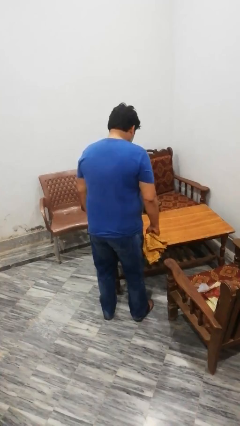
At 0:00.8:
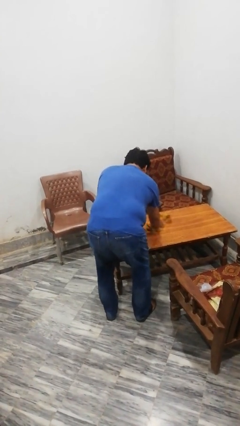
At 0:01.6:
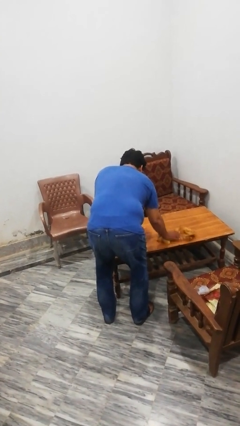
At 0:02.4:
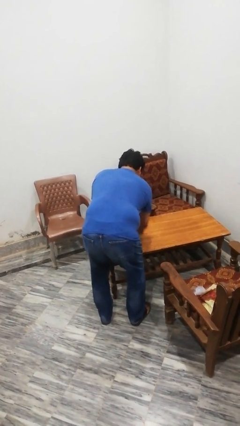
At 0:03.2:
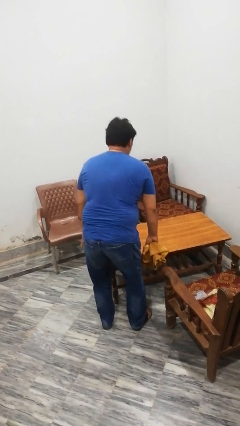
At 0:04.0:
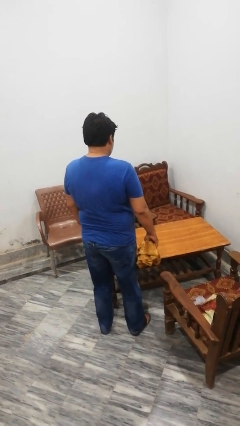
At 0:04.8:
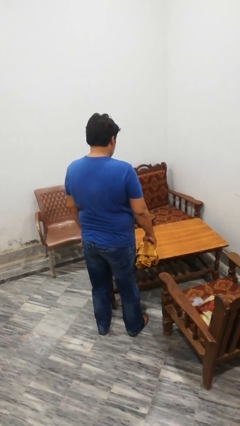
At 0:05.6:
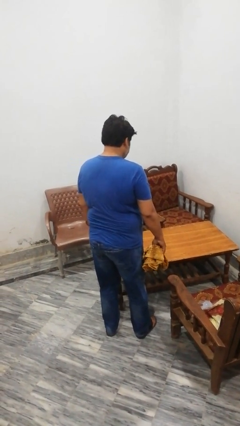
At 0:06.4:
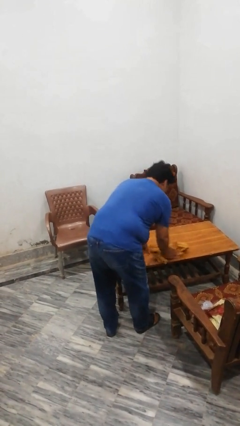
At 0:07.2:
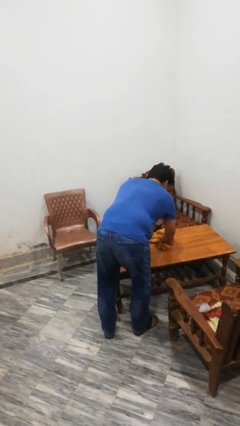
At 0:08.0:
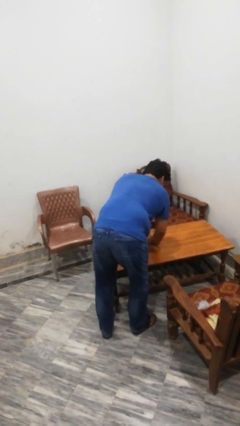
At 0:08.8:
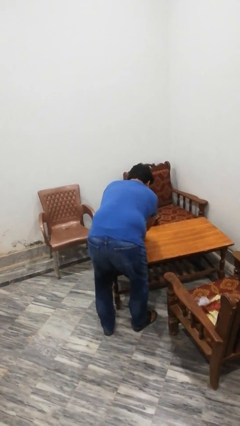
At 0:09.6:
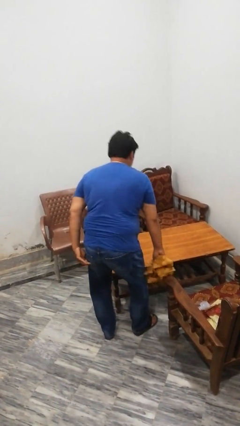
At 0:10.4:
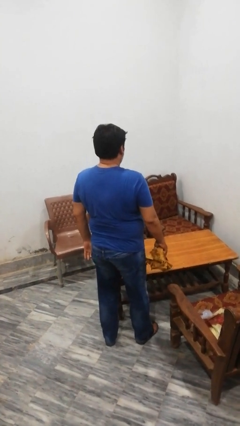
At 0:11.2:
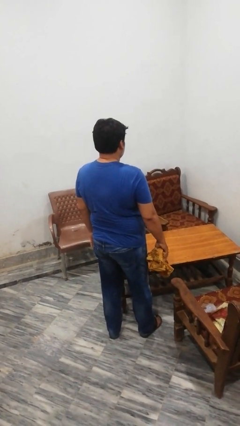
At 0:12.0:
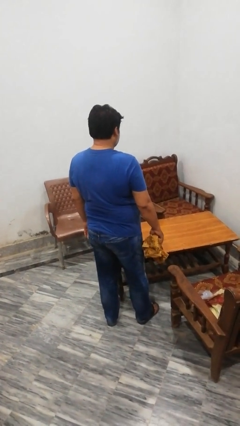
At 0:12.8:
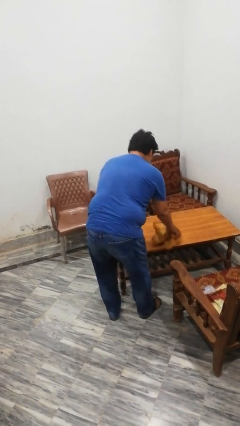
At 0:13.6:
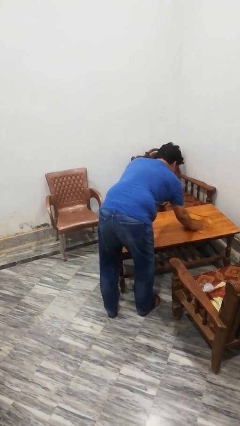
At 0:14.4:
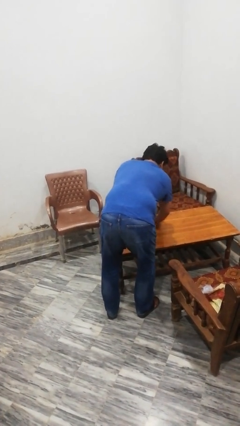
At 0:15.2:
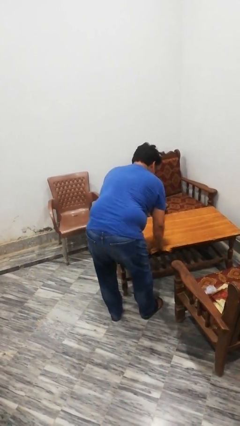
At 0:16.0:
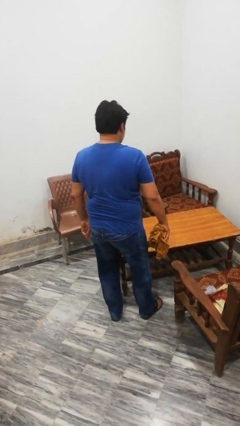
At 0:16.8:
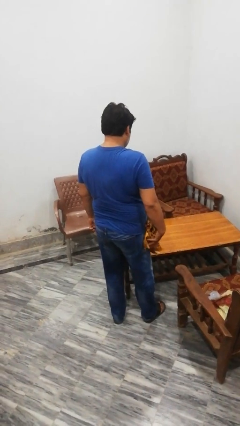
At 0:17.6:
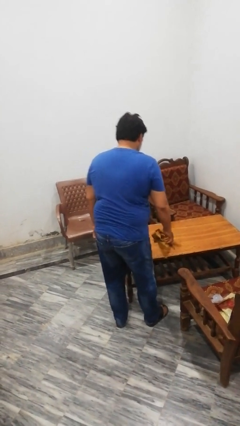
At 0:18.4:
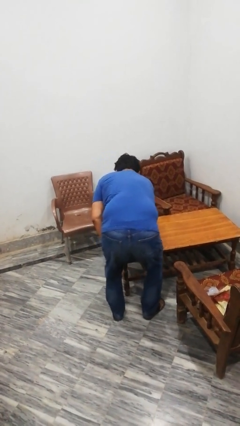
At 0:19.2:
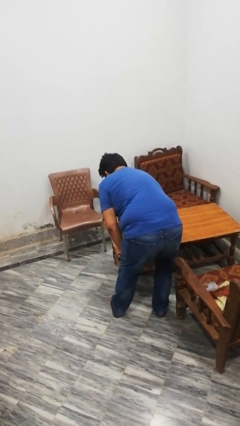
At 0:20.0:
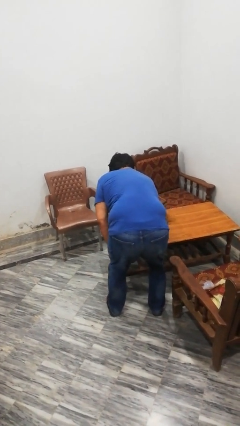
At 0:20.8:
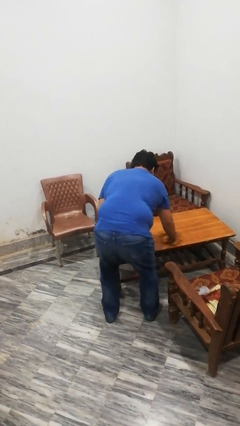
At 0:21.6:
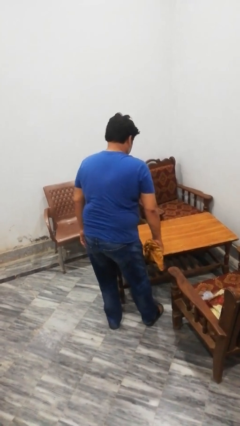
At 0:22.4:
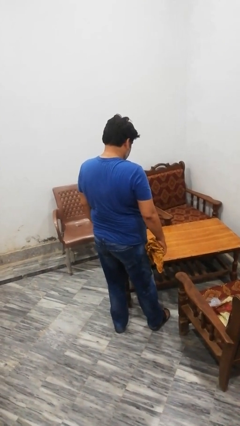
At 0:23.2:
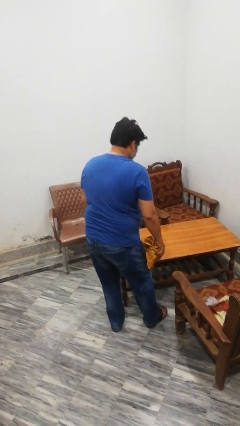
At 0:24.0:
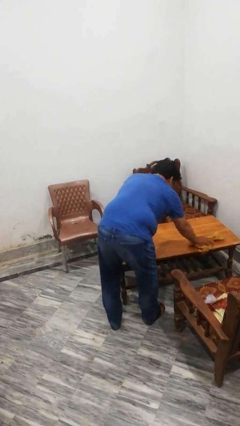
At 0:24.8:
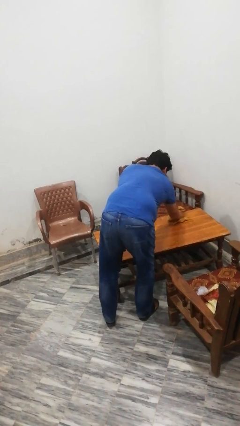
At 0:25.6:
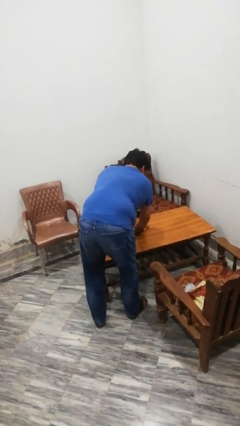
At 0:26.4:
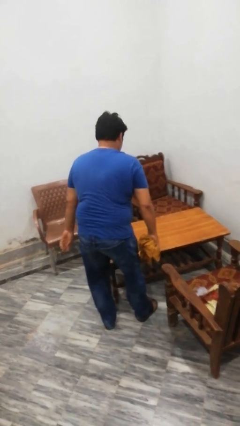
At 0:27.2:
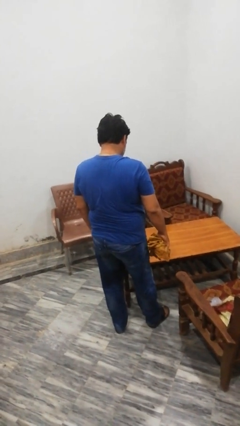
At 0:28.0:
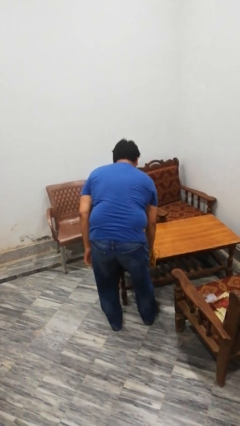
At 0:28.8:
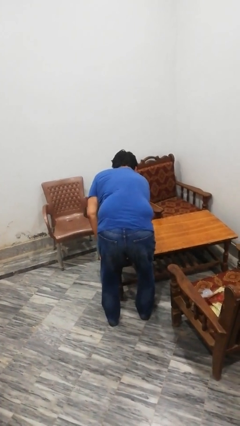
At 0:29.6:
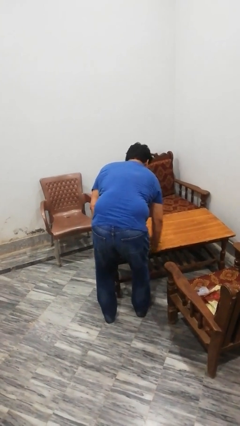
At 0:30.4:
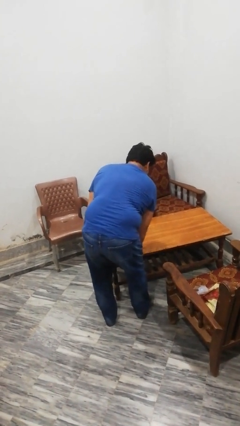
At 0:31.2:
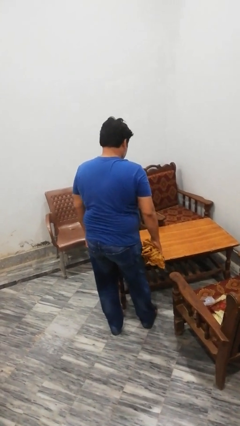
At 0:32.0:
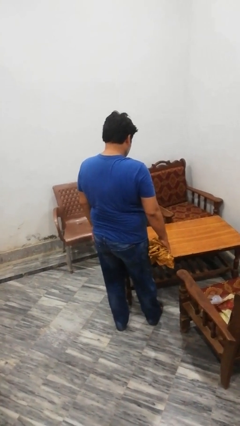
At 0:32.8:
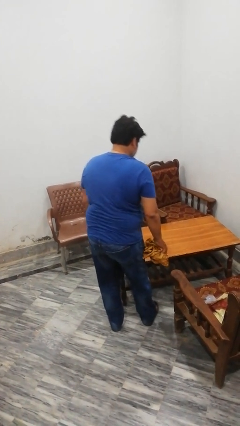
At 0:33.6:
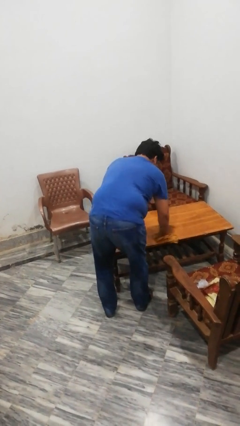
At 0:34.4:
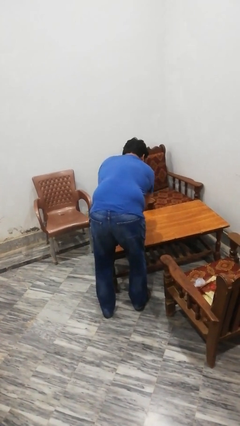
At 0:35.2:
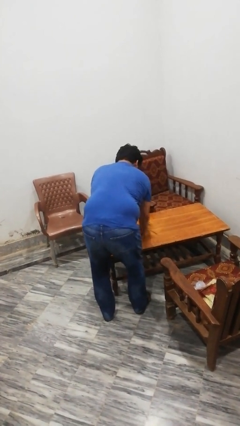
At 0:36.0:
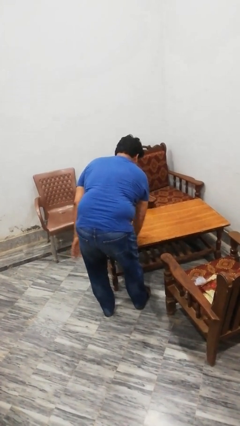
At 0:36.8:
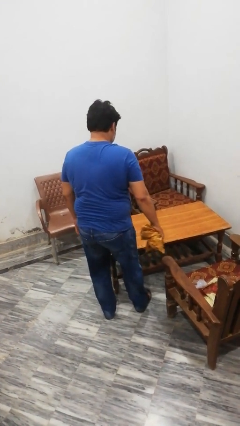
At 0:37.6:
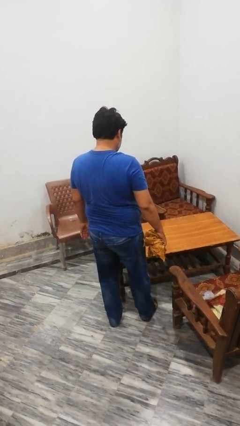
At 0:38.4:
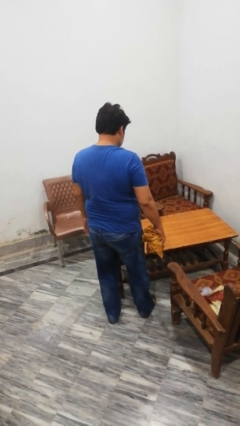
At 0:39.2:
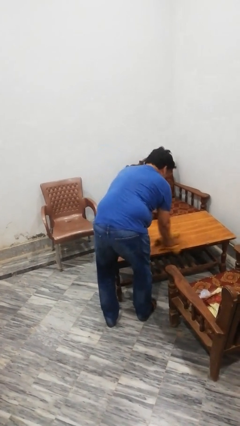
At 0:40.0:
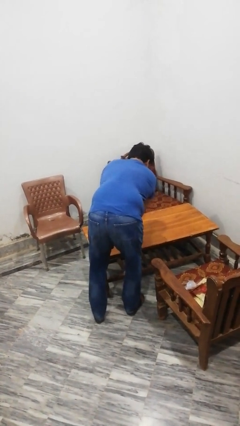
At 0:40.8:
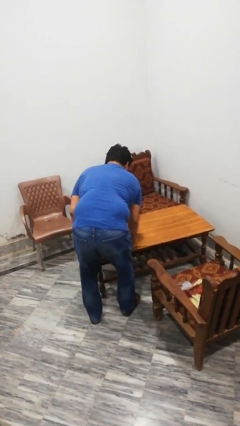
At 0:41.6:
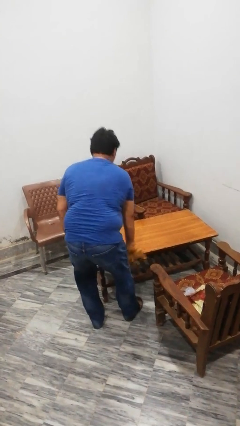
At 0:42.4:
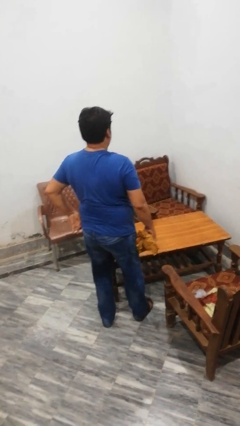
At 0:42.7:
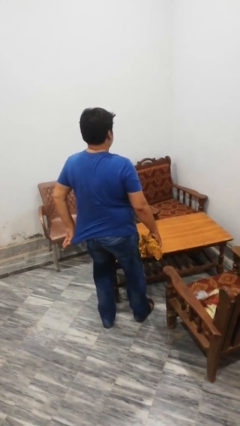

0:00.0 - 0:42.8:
person cleans table with rag

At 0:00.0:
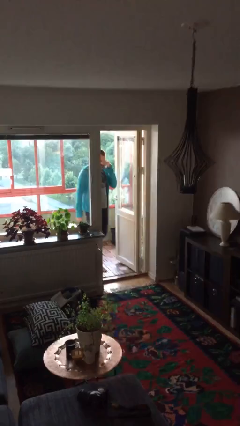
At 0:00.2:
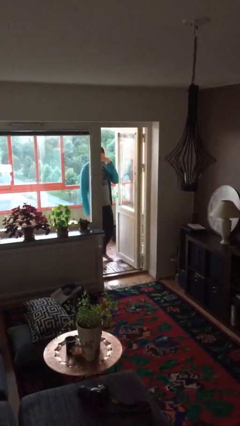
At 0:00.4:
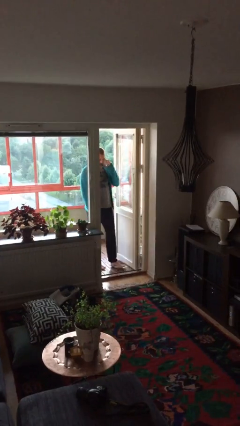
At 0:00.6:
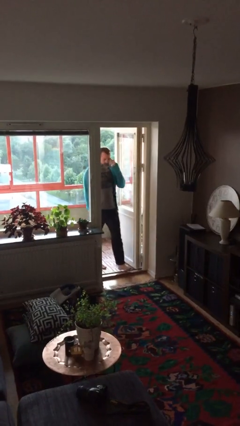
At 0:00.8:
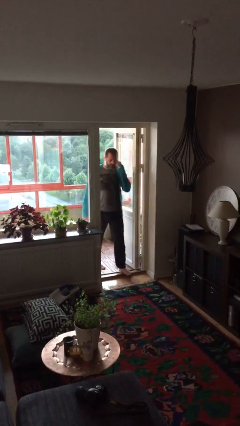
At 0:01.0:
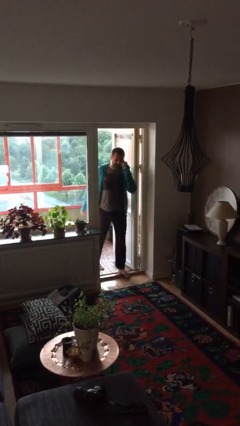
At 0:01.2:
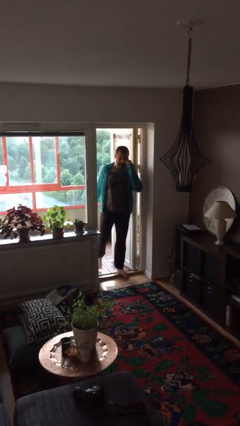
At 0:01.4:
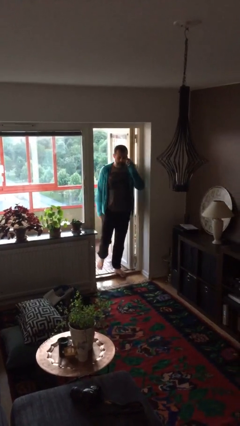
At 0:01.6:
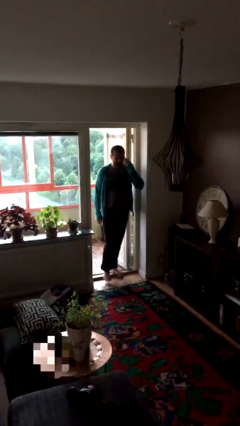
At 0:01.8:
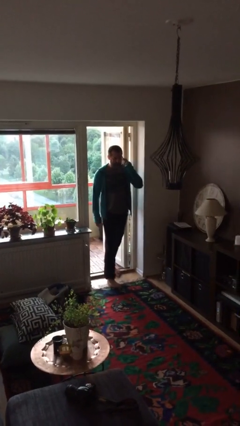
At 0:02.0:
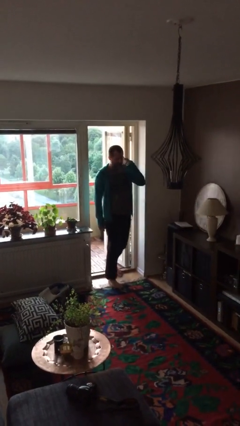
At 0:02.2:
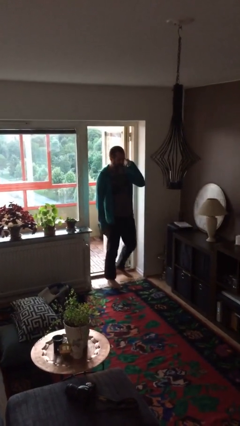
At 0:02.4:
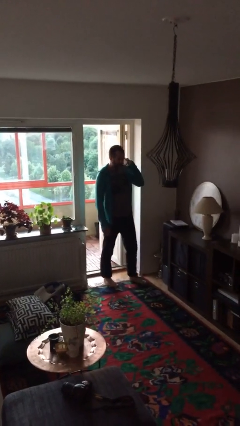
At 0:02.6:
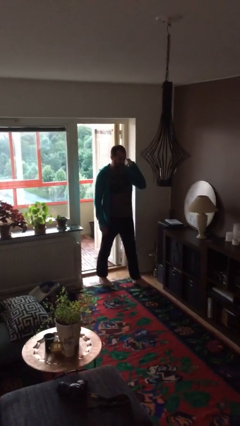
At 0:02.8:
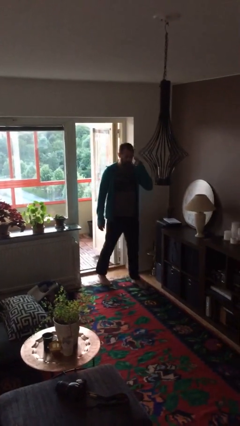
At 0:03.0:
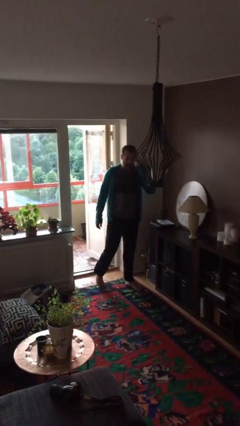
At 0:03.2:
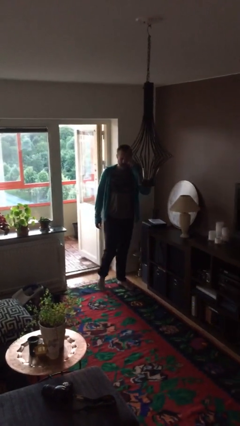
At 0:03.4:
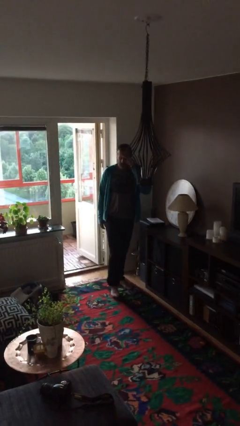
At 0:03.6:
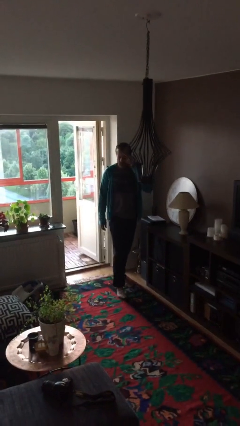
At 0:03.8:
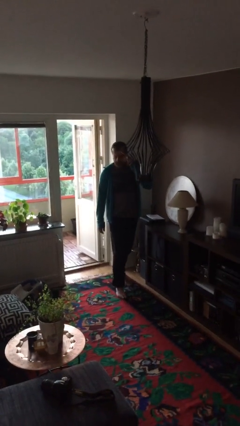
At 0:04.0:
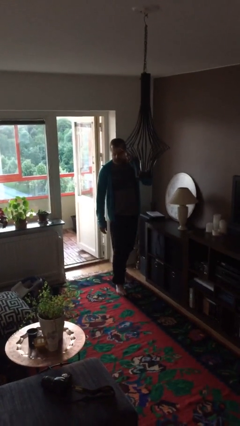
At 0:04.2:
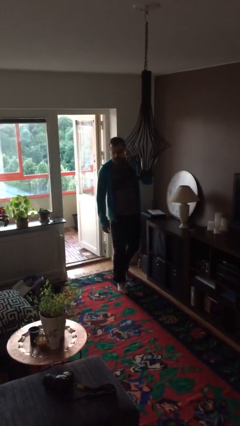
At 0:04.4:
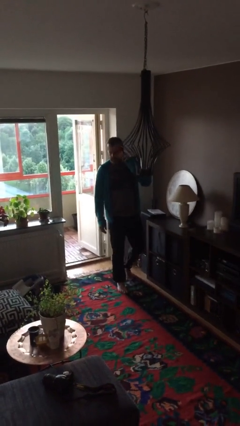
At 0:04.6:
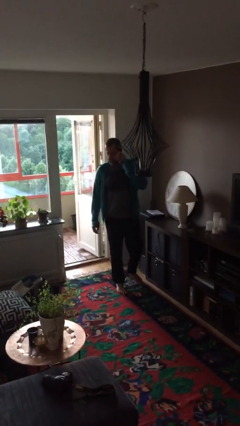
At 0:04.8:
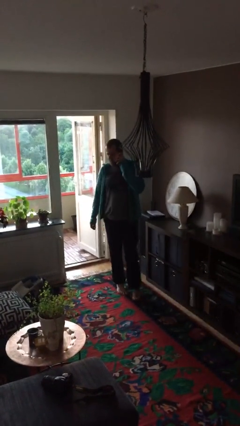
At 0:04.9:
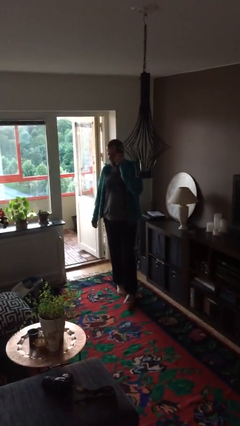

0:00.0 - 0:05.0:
person enters scene through structure

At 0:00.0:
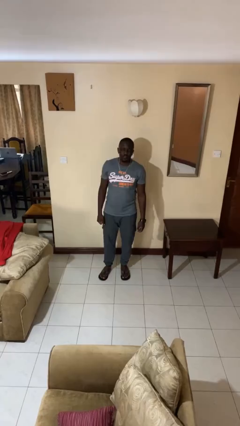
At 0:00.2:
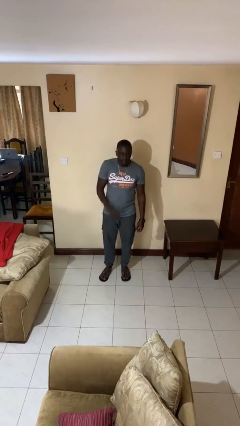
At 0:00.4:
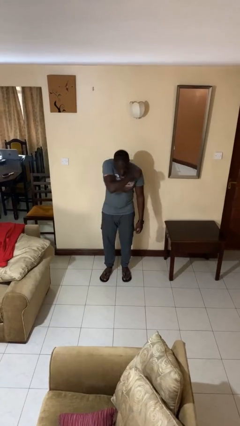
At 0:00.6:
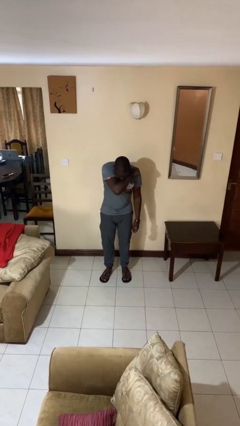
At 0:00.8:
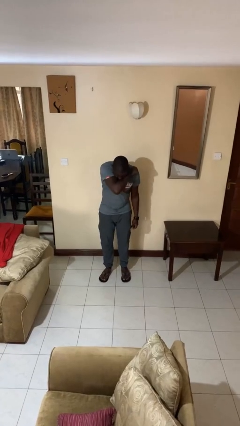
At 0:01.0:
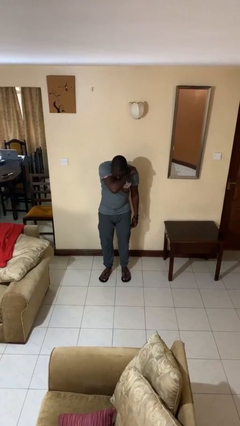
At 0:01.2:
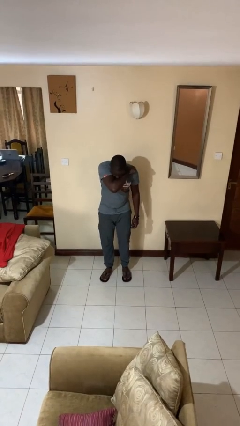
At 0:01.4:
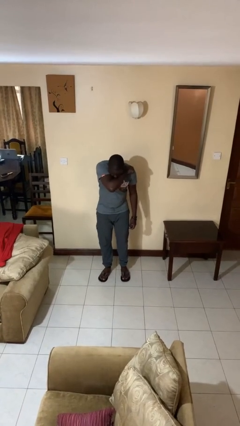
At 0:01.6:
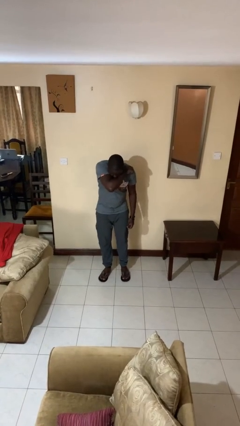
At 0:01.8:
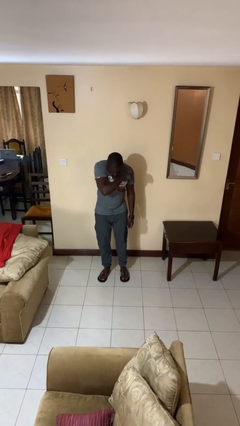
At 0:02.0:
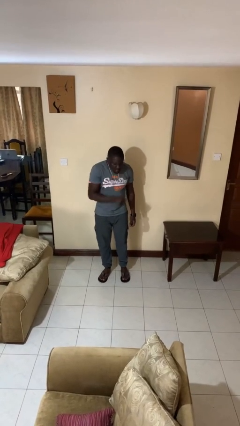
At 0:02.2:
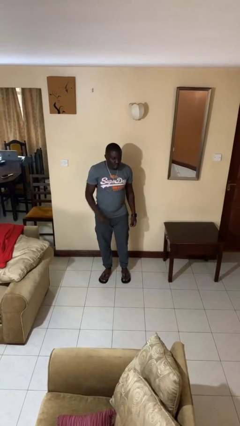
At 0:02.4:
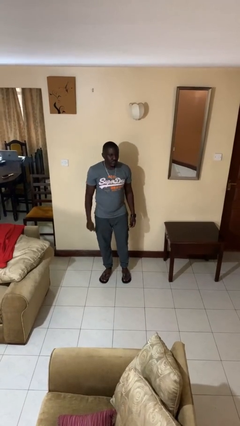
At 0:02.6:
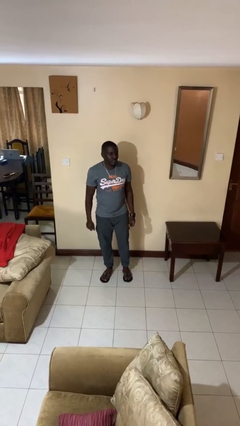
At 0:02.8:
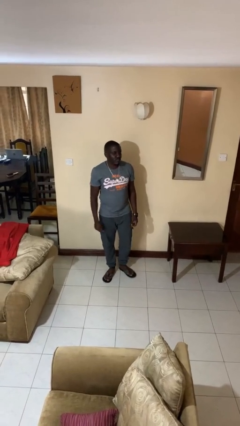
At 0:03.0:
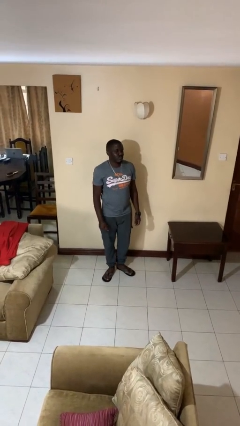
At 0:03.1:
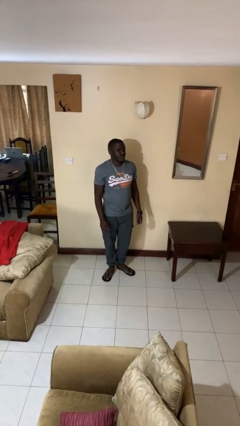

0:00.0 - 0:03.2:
person sneezes into arm
